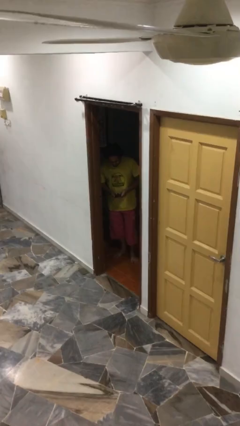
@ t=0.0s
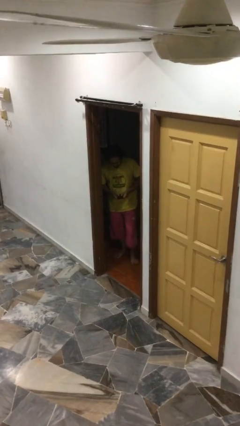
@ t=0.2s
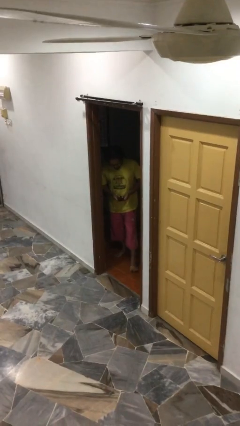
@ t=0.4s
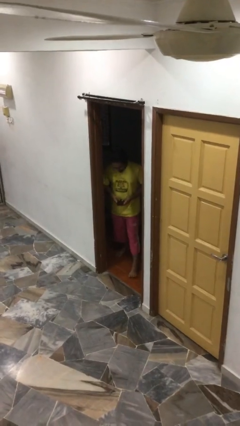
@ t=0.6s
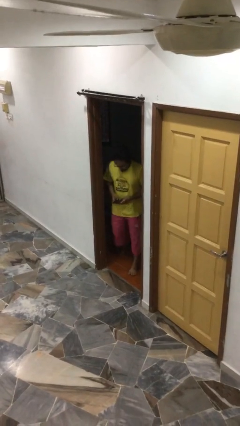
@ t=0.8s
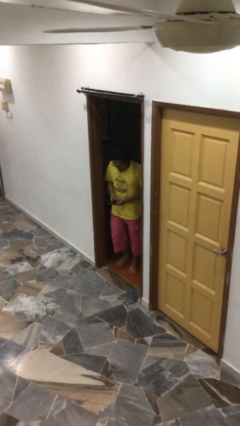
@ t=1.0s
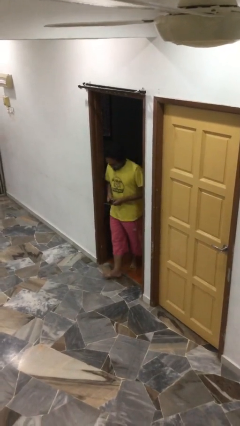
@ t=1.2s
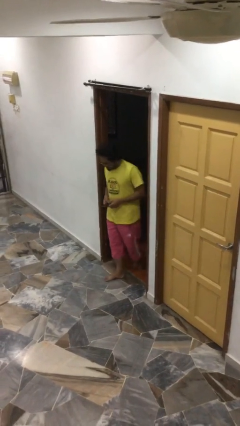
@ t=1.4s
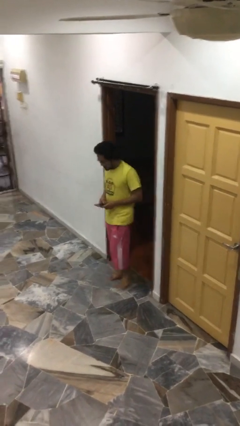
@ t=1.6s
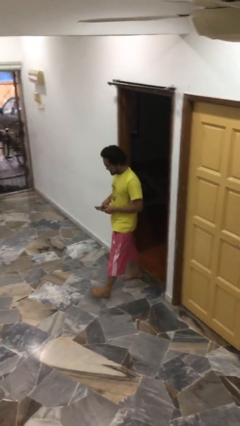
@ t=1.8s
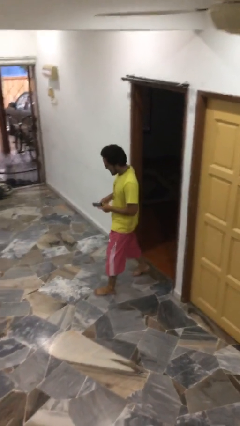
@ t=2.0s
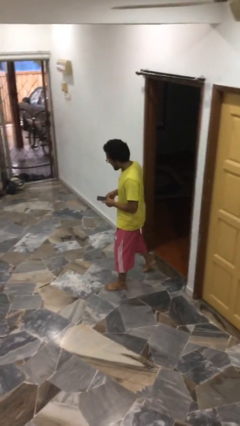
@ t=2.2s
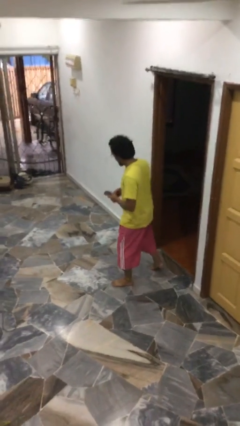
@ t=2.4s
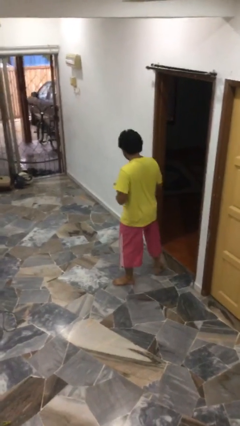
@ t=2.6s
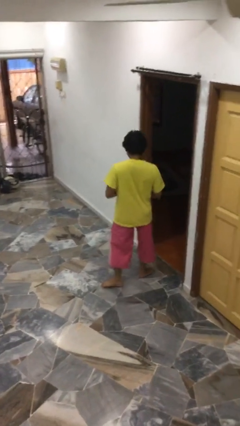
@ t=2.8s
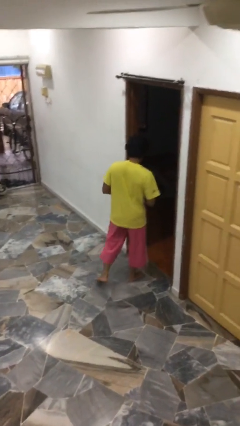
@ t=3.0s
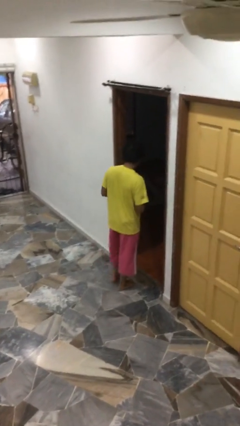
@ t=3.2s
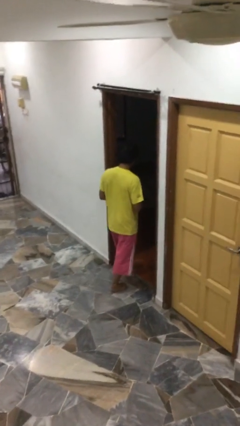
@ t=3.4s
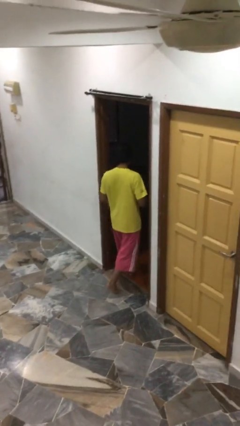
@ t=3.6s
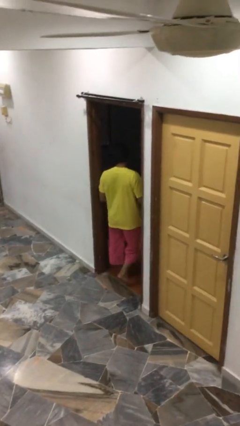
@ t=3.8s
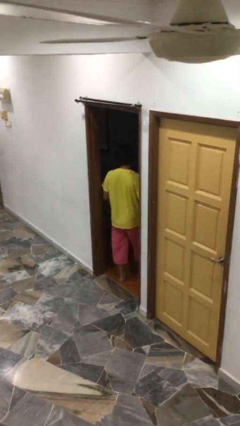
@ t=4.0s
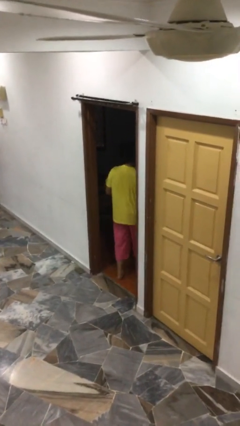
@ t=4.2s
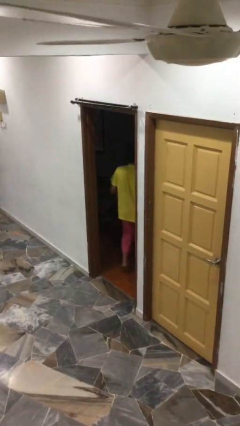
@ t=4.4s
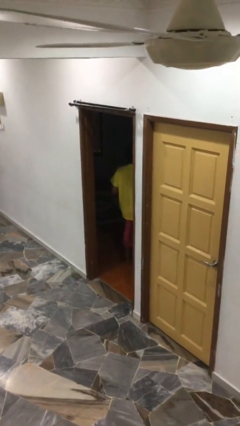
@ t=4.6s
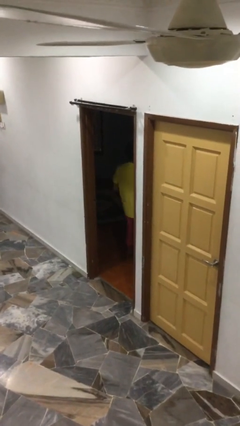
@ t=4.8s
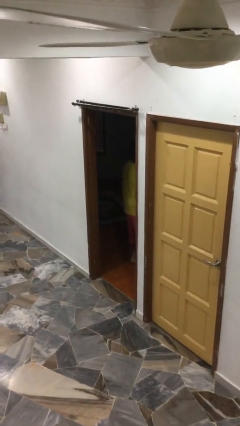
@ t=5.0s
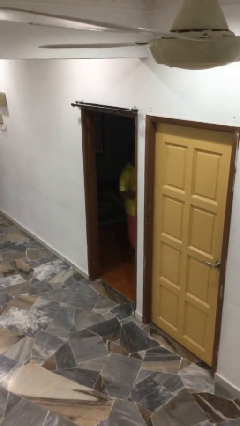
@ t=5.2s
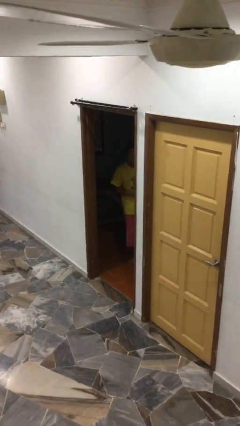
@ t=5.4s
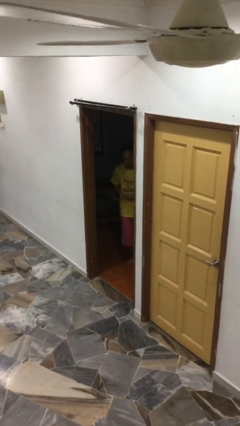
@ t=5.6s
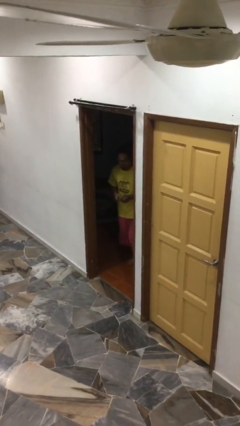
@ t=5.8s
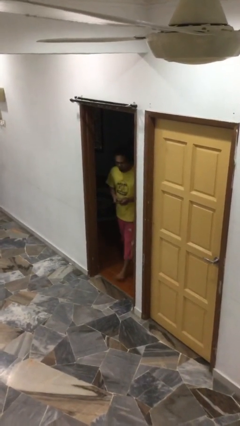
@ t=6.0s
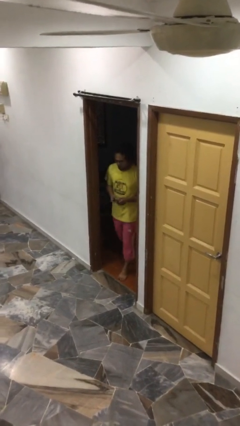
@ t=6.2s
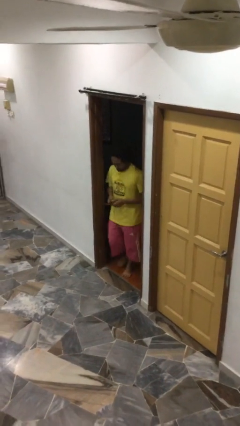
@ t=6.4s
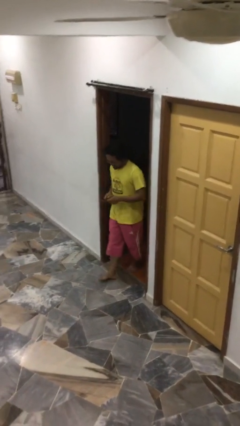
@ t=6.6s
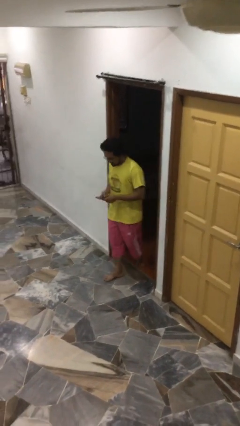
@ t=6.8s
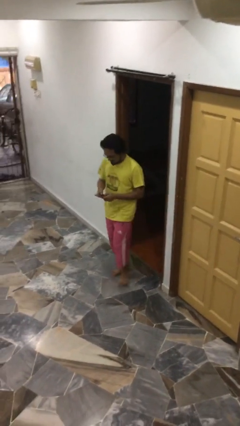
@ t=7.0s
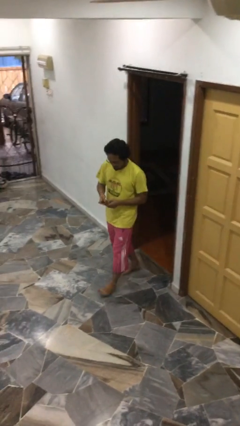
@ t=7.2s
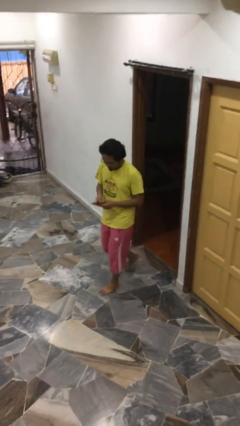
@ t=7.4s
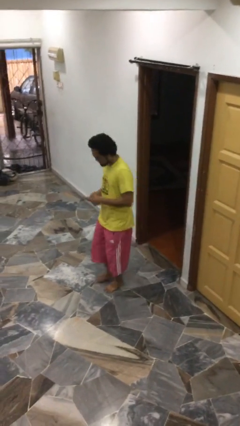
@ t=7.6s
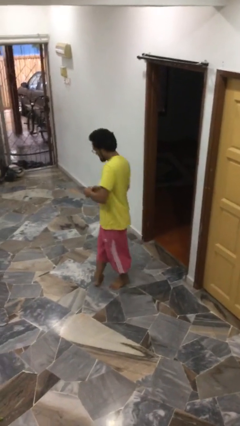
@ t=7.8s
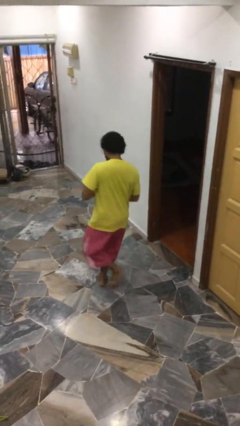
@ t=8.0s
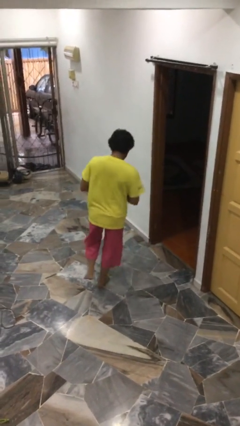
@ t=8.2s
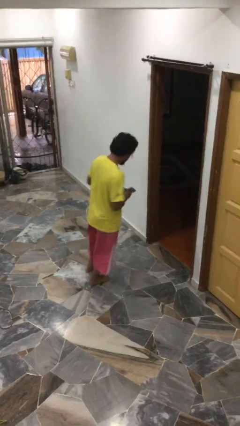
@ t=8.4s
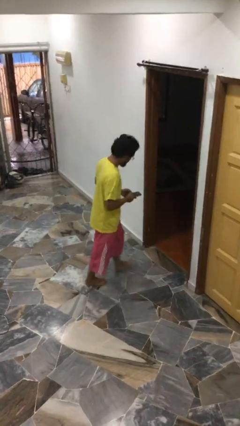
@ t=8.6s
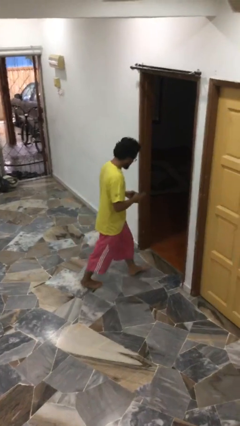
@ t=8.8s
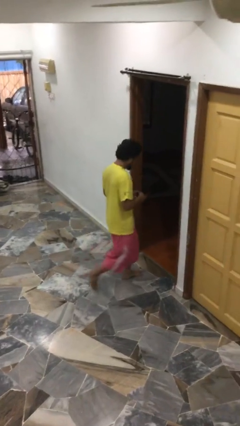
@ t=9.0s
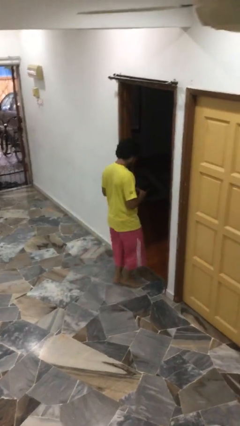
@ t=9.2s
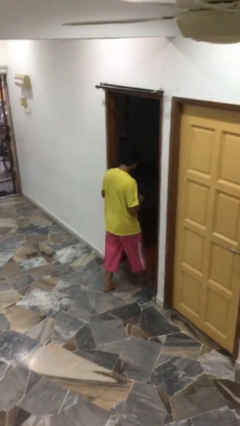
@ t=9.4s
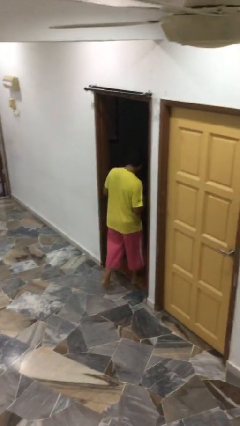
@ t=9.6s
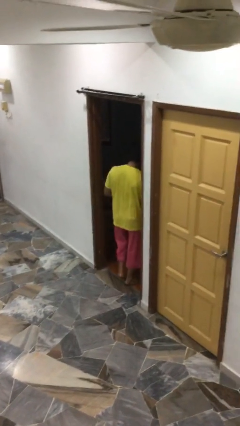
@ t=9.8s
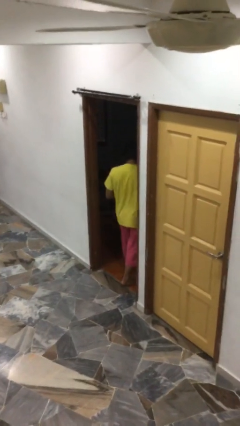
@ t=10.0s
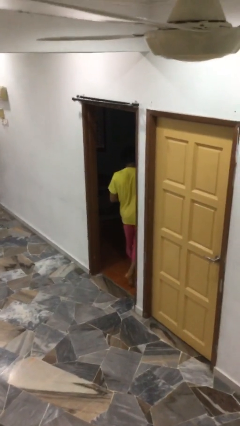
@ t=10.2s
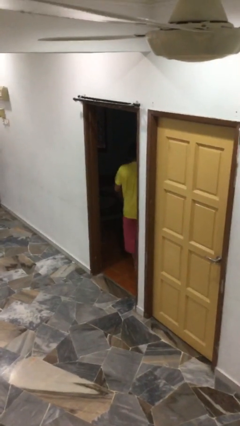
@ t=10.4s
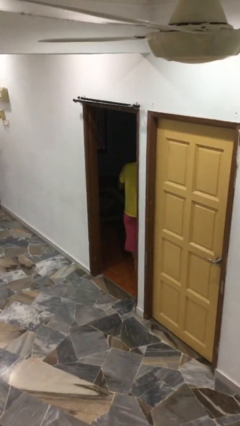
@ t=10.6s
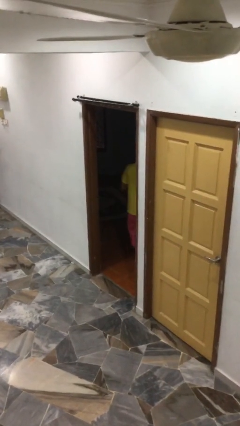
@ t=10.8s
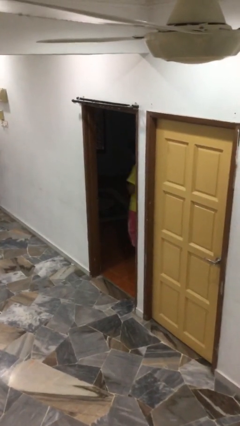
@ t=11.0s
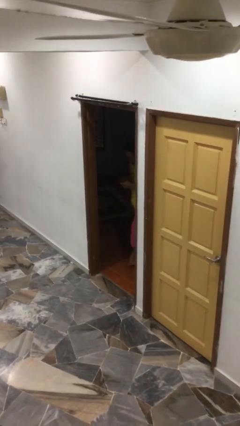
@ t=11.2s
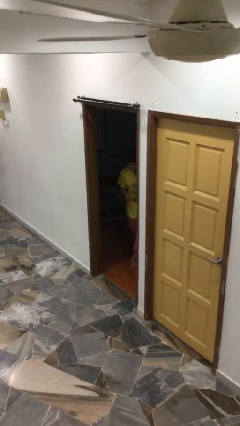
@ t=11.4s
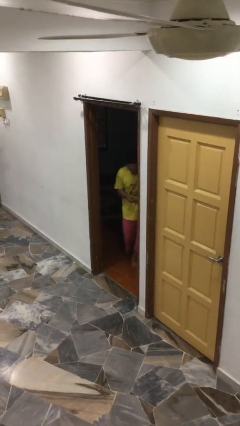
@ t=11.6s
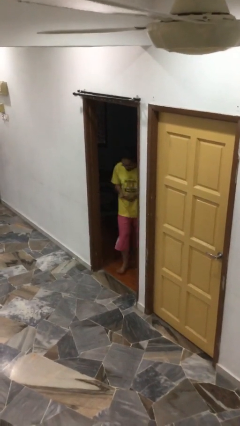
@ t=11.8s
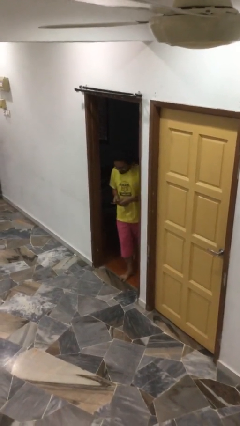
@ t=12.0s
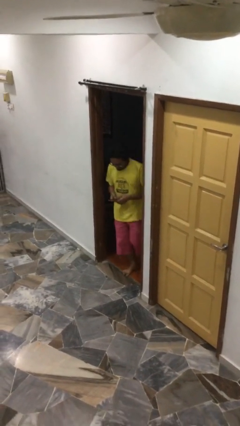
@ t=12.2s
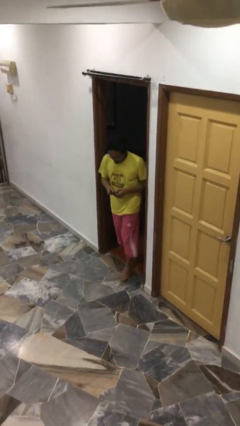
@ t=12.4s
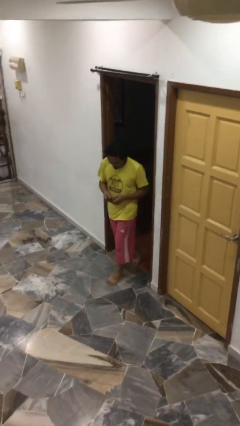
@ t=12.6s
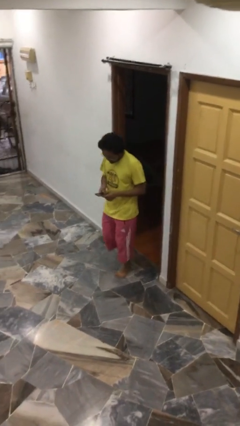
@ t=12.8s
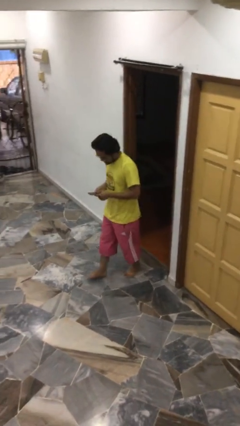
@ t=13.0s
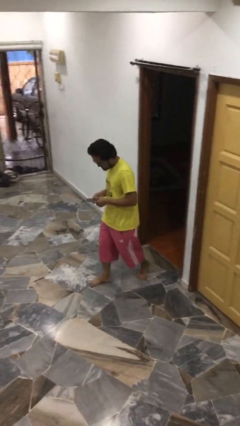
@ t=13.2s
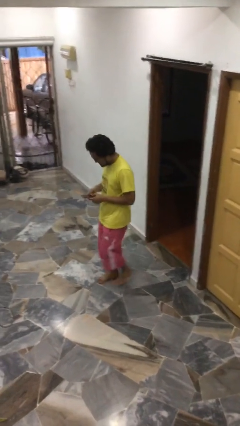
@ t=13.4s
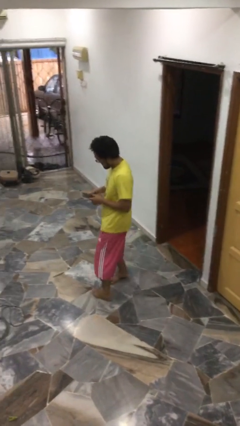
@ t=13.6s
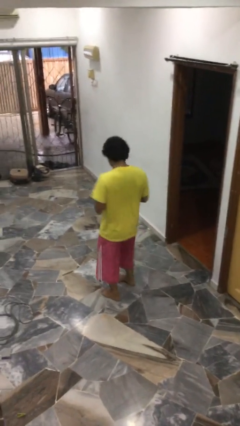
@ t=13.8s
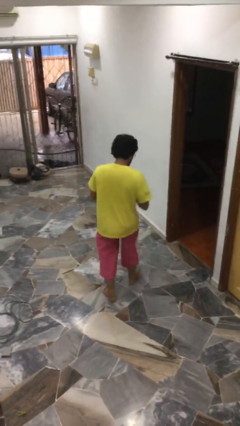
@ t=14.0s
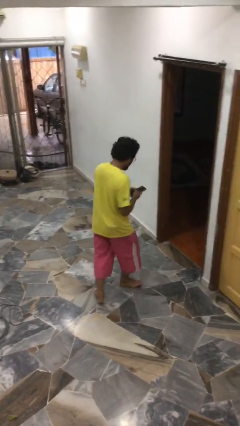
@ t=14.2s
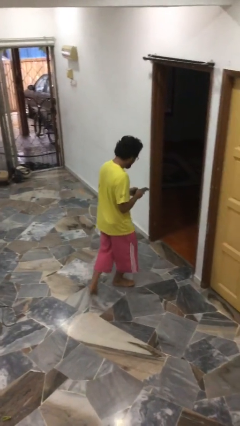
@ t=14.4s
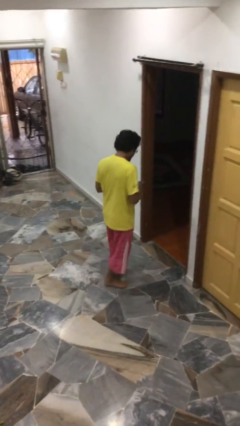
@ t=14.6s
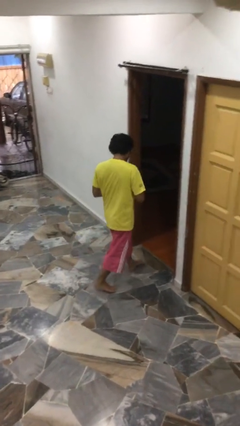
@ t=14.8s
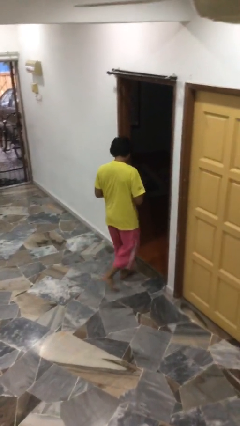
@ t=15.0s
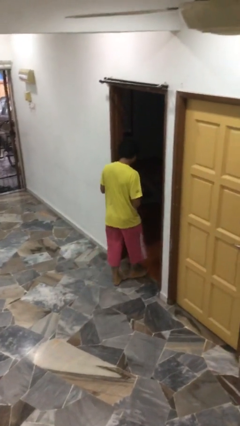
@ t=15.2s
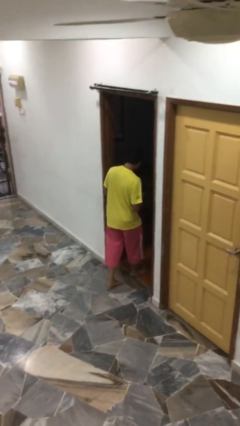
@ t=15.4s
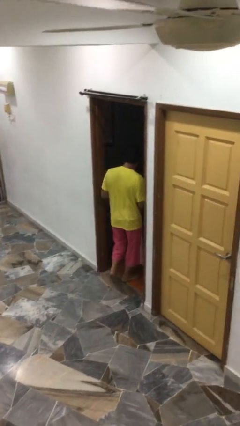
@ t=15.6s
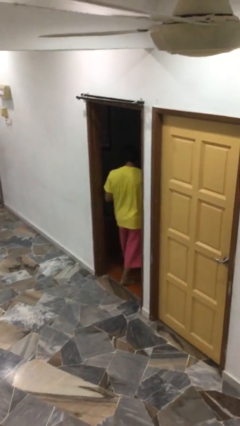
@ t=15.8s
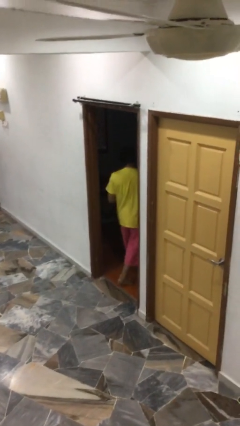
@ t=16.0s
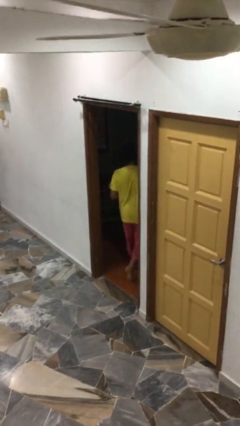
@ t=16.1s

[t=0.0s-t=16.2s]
person texts on phone

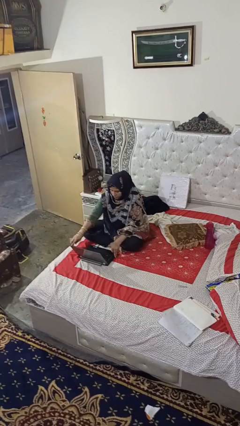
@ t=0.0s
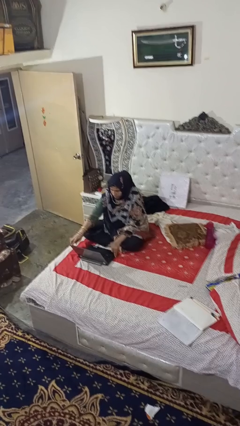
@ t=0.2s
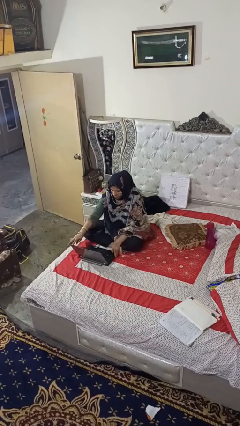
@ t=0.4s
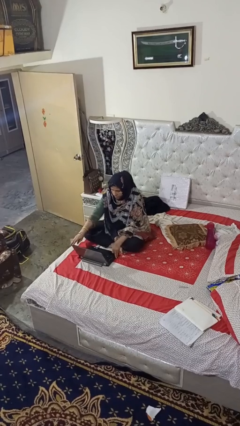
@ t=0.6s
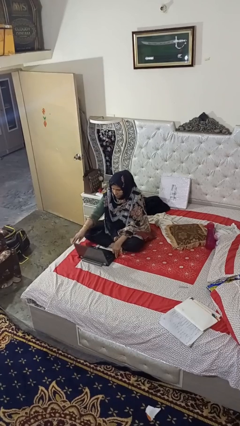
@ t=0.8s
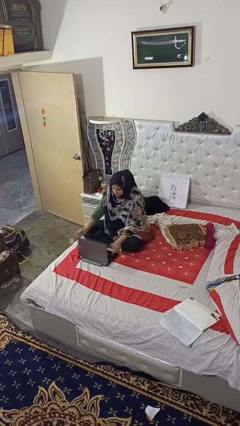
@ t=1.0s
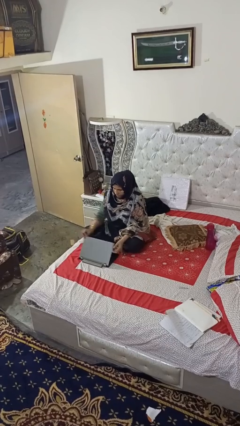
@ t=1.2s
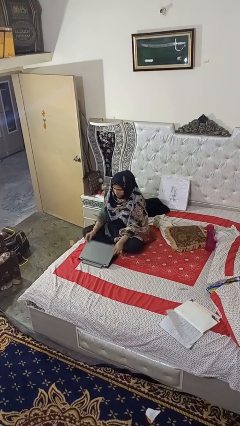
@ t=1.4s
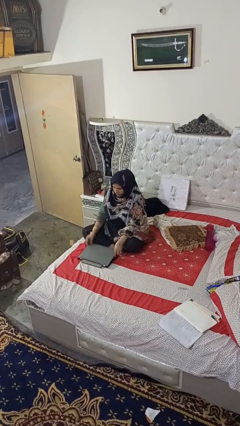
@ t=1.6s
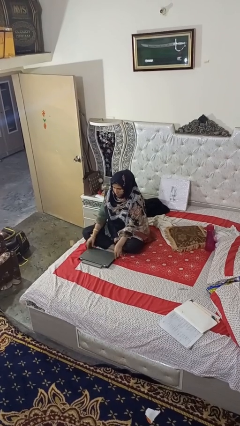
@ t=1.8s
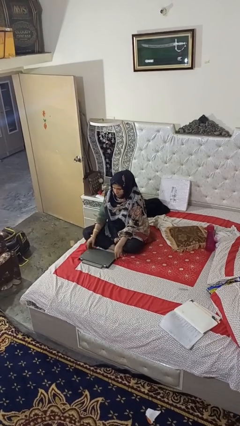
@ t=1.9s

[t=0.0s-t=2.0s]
person closes laptop
